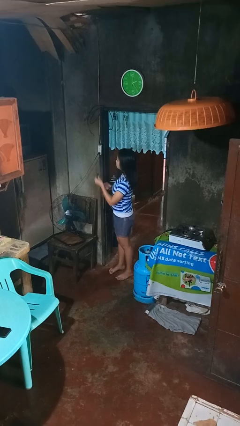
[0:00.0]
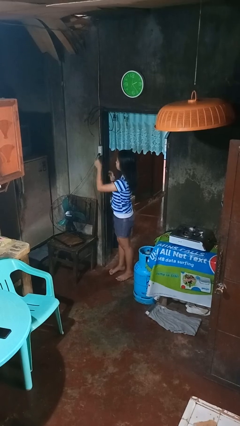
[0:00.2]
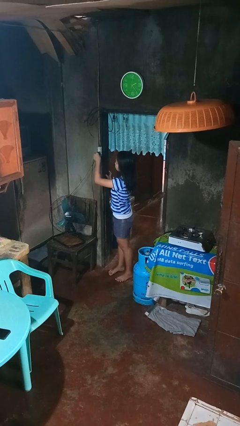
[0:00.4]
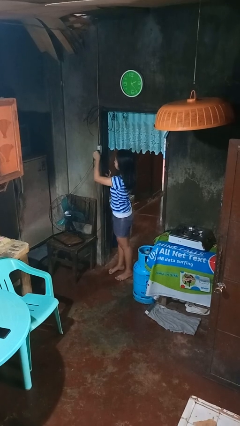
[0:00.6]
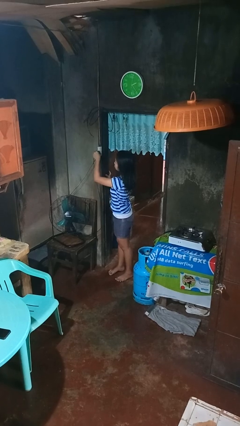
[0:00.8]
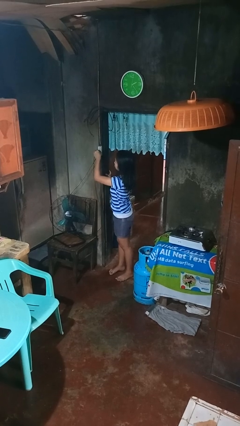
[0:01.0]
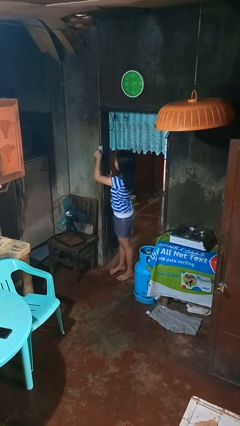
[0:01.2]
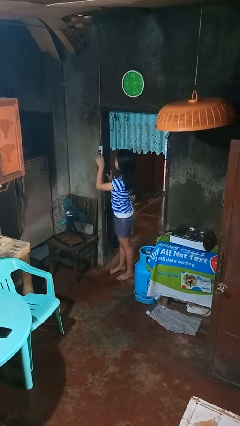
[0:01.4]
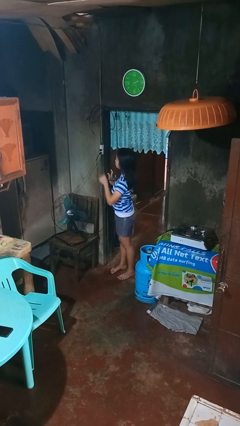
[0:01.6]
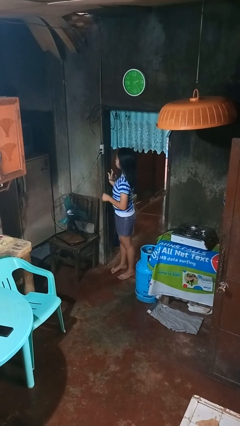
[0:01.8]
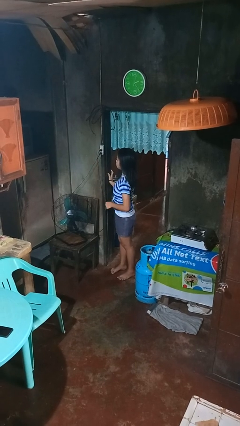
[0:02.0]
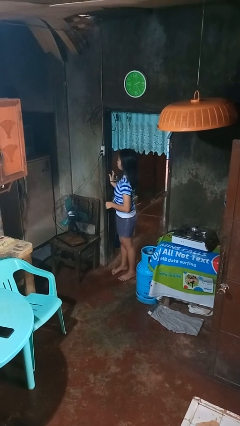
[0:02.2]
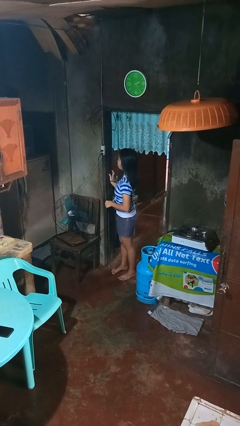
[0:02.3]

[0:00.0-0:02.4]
person plugs into electrical socket

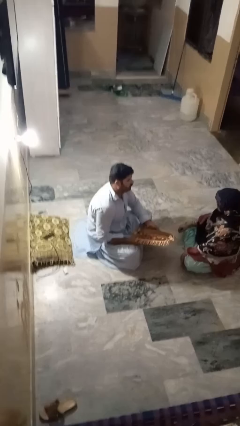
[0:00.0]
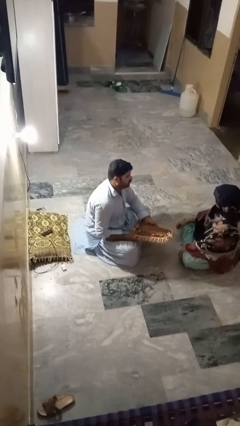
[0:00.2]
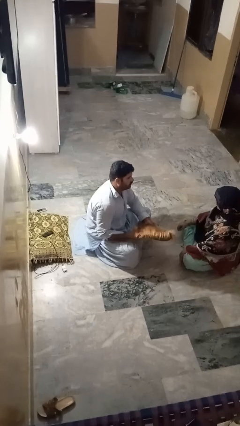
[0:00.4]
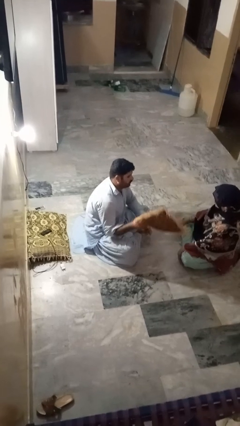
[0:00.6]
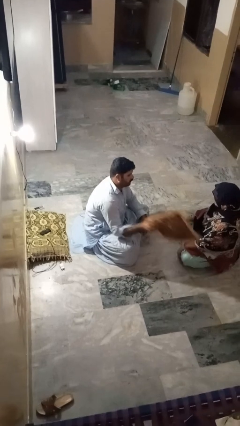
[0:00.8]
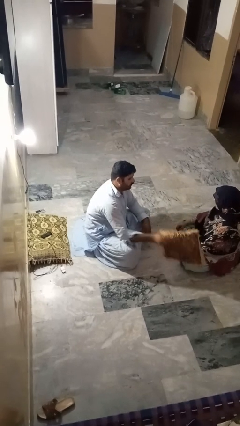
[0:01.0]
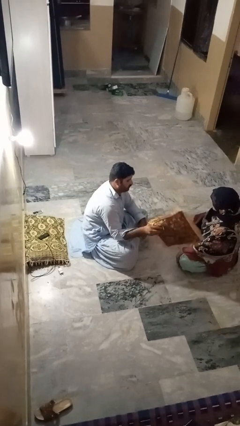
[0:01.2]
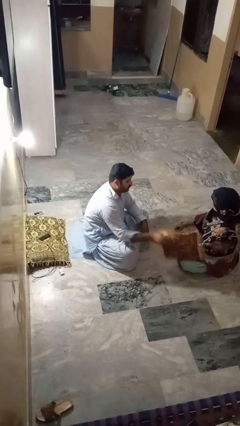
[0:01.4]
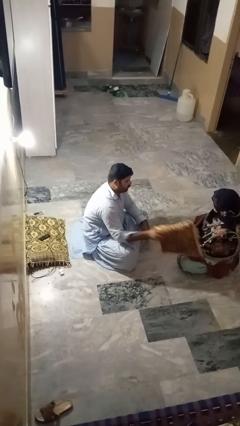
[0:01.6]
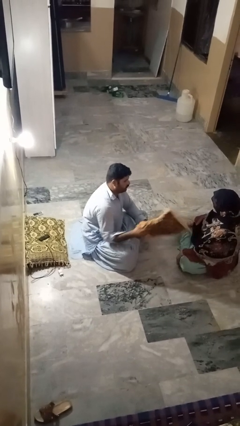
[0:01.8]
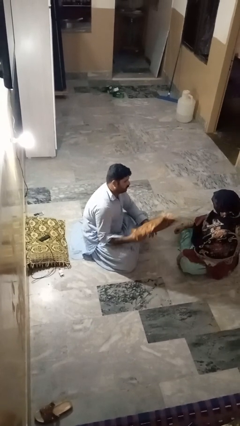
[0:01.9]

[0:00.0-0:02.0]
person hits person with pillow

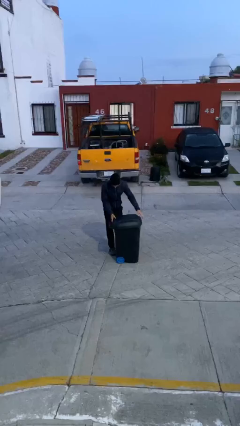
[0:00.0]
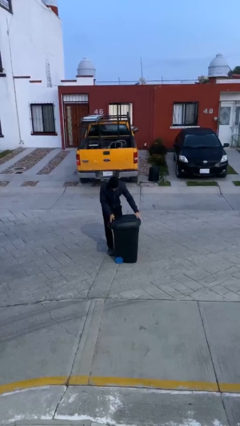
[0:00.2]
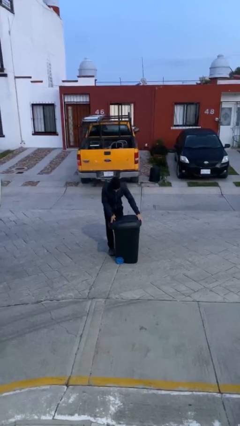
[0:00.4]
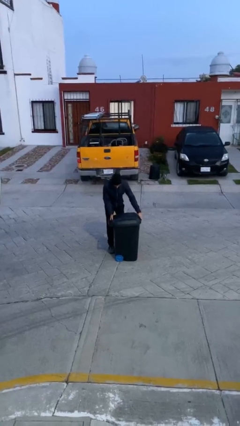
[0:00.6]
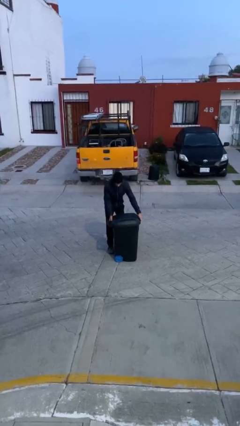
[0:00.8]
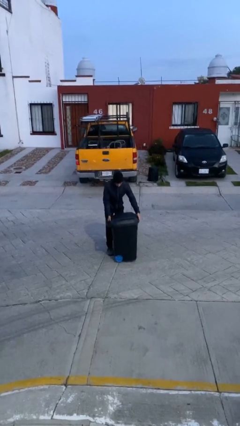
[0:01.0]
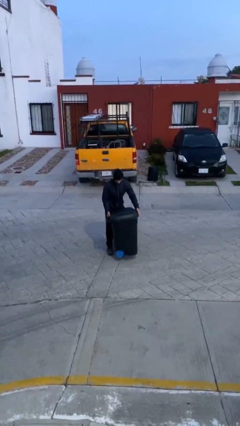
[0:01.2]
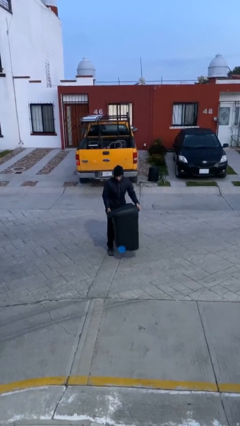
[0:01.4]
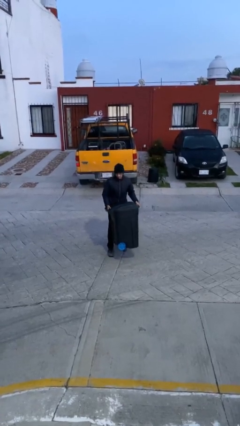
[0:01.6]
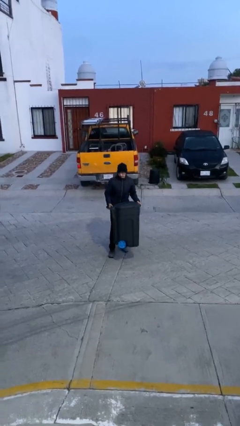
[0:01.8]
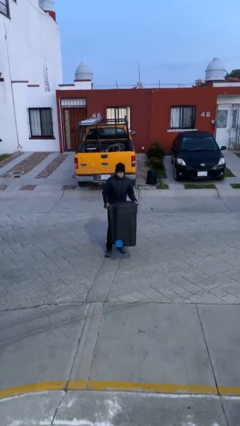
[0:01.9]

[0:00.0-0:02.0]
person picks up object from floor

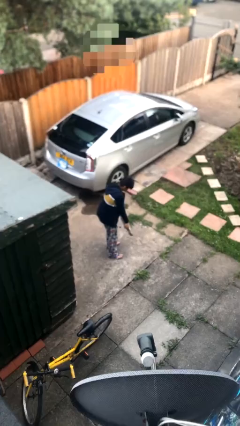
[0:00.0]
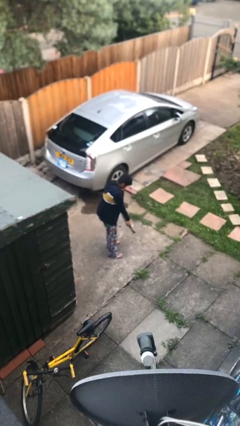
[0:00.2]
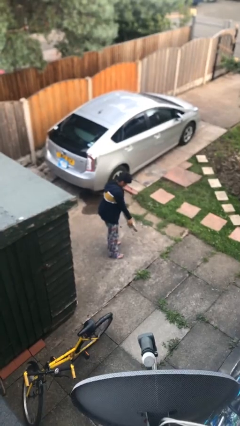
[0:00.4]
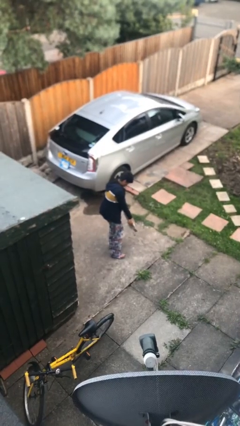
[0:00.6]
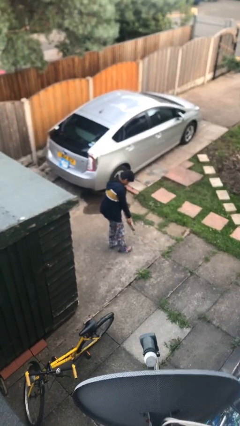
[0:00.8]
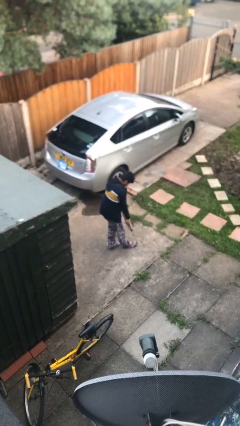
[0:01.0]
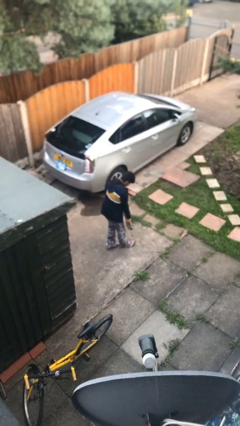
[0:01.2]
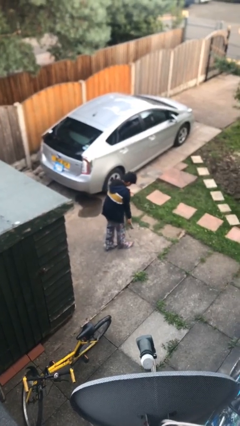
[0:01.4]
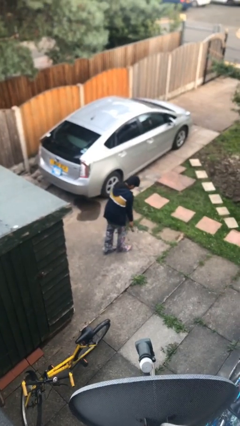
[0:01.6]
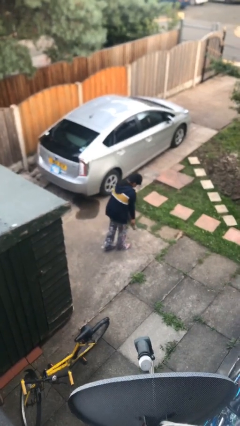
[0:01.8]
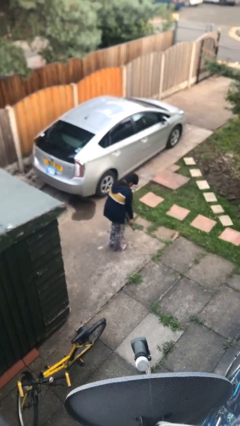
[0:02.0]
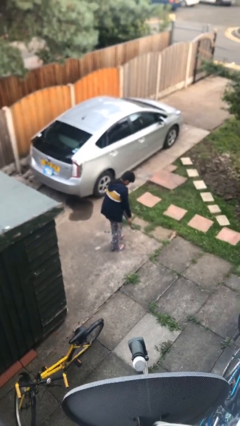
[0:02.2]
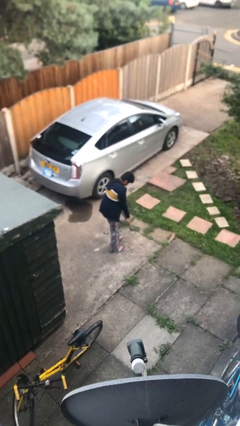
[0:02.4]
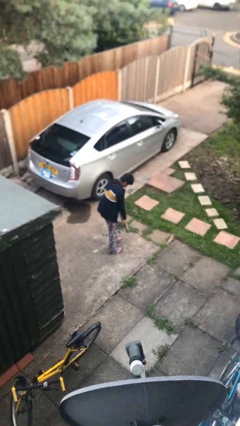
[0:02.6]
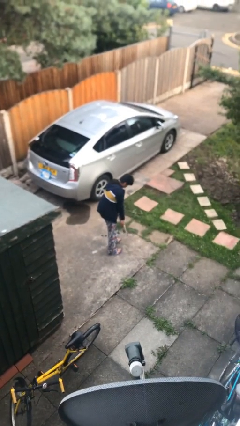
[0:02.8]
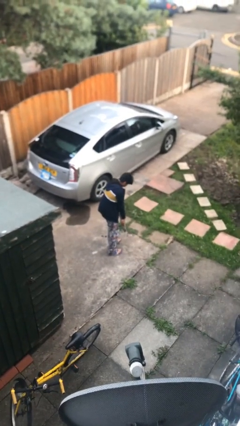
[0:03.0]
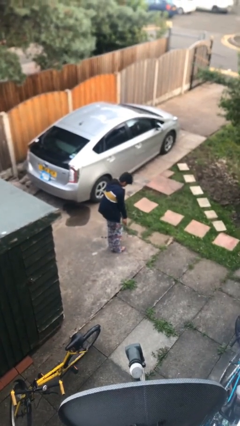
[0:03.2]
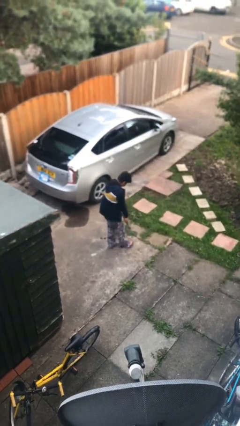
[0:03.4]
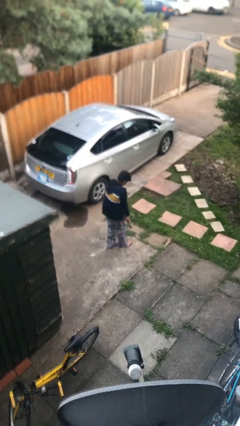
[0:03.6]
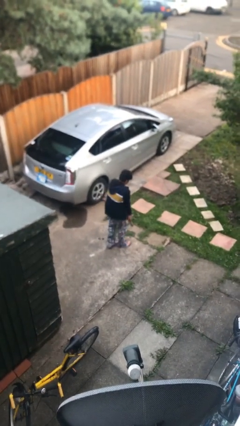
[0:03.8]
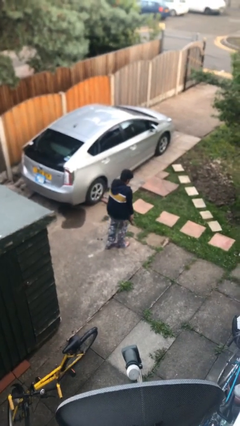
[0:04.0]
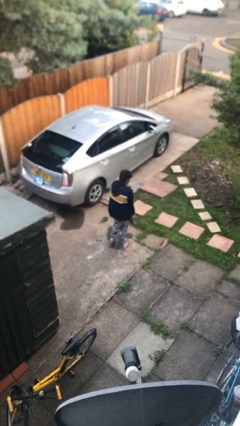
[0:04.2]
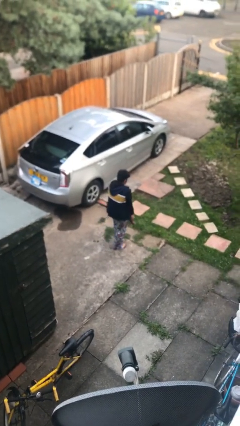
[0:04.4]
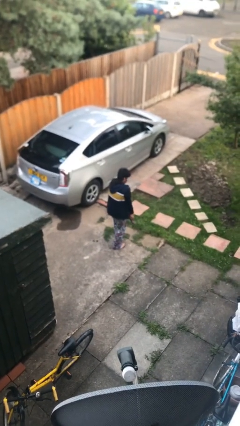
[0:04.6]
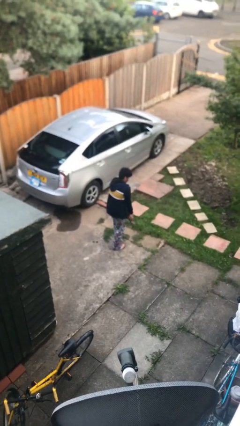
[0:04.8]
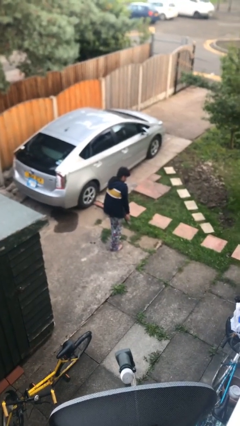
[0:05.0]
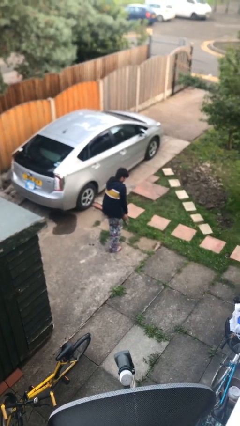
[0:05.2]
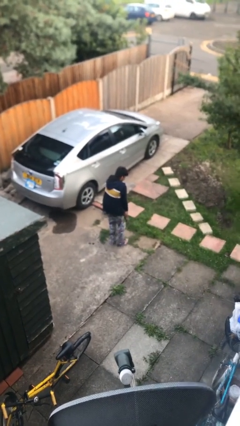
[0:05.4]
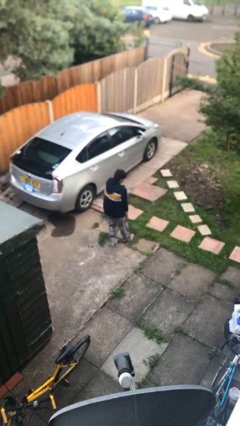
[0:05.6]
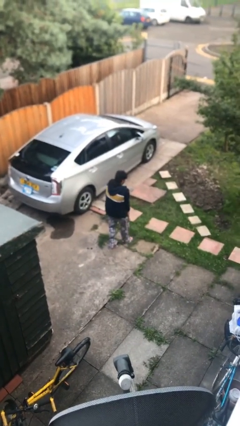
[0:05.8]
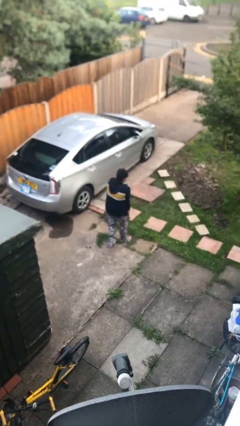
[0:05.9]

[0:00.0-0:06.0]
person carries heavy object

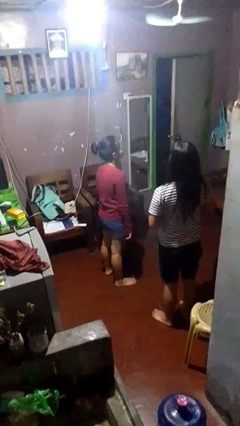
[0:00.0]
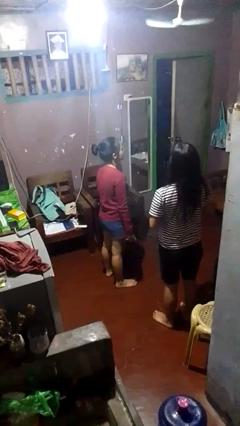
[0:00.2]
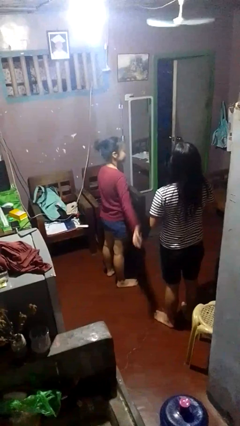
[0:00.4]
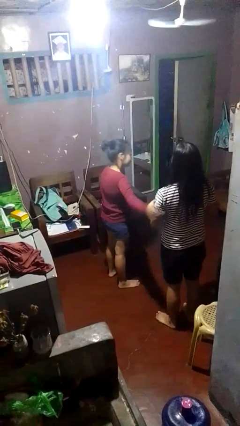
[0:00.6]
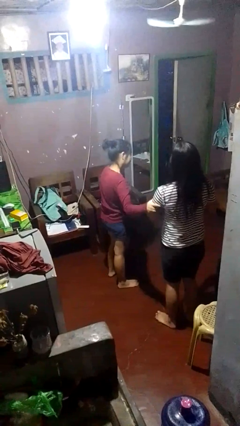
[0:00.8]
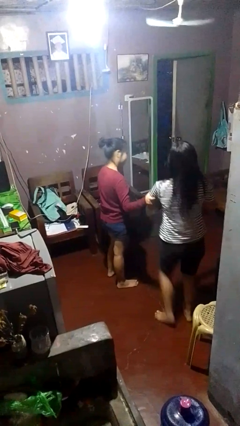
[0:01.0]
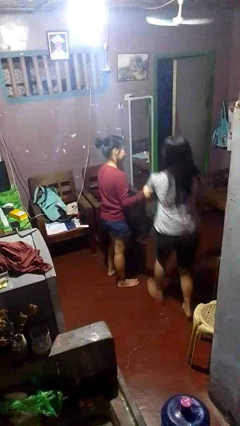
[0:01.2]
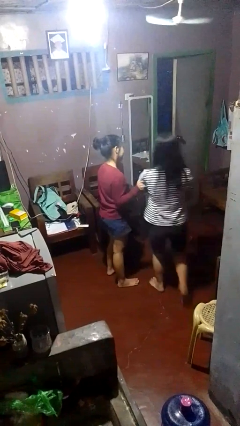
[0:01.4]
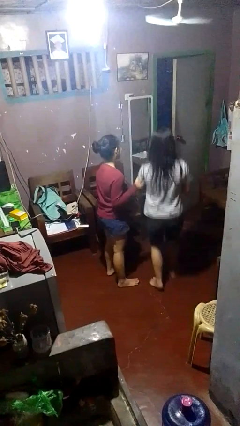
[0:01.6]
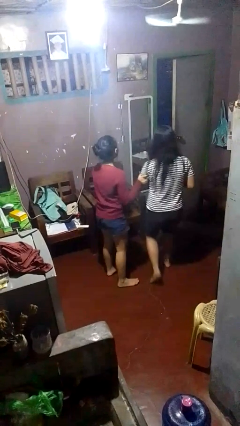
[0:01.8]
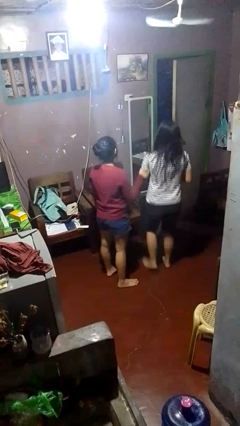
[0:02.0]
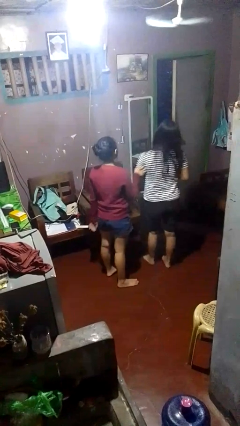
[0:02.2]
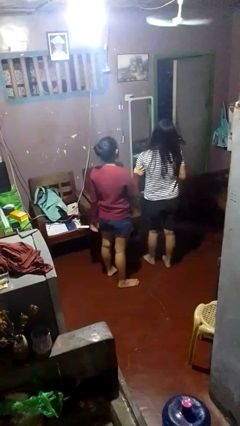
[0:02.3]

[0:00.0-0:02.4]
person grabs person by bicep

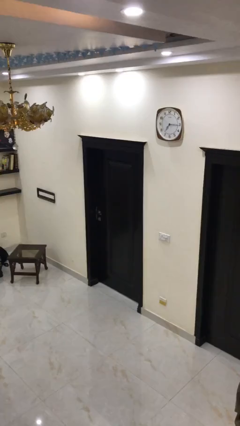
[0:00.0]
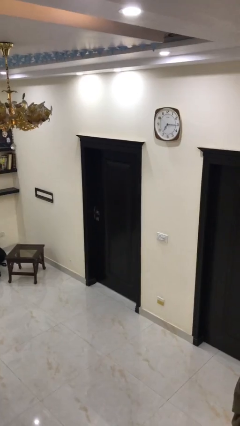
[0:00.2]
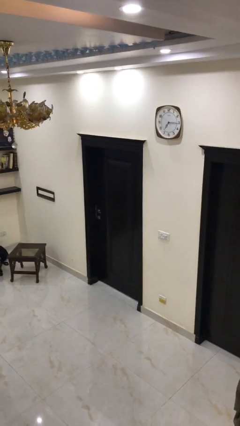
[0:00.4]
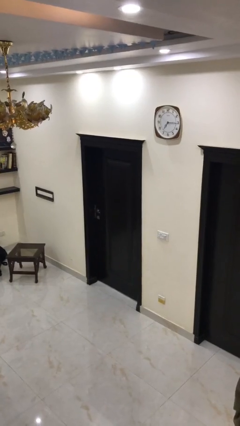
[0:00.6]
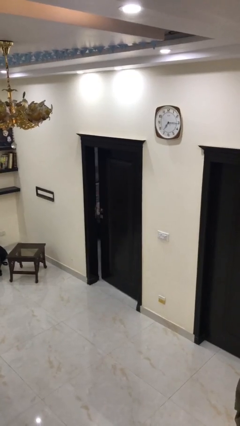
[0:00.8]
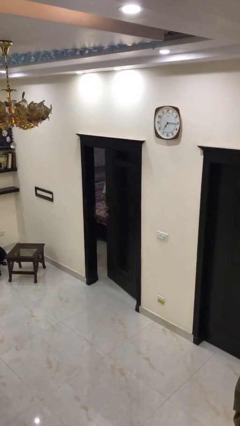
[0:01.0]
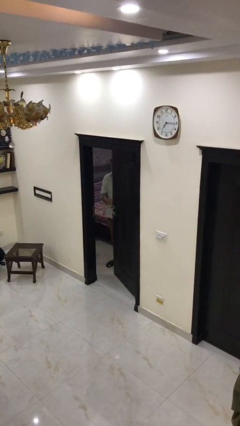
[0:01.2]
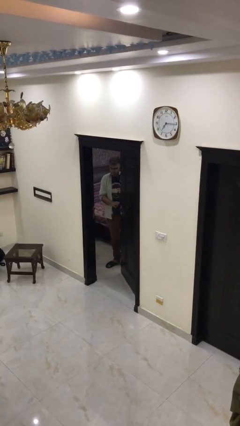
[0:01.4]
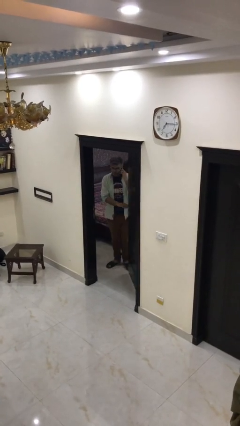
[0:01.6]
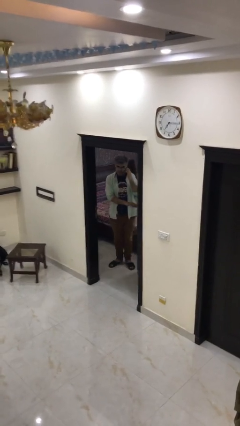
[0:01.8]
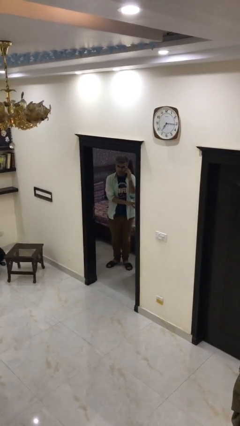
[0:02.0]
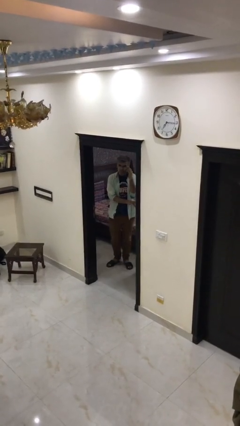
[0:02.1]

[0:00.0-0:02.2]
person opens facility door

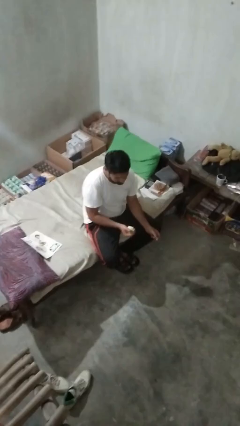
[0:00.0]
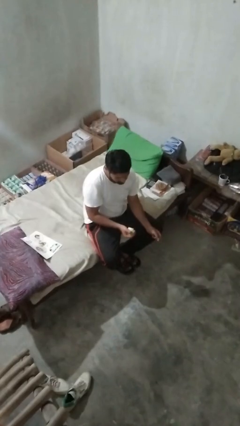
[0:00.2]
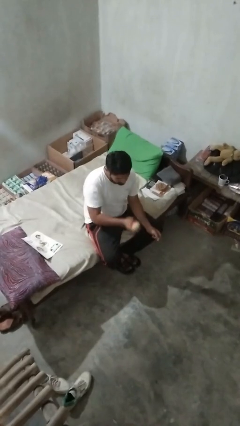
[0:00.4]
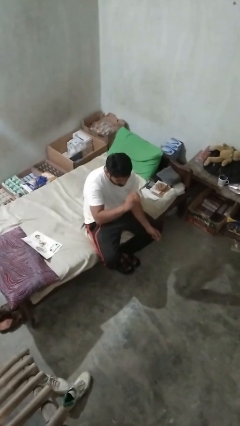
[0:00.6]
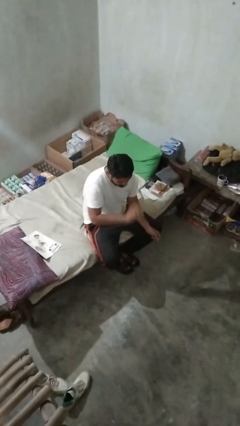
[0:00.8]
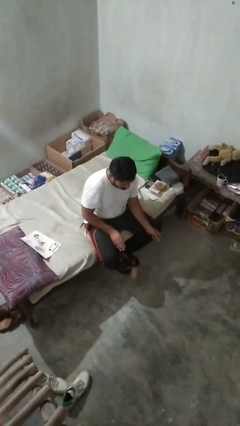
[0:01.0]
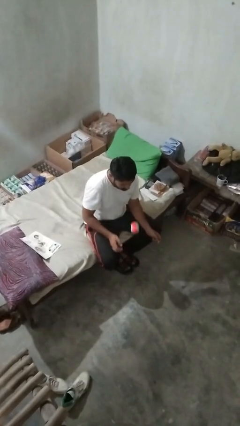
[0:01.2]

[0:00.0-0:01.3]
person bounces ball on floor
